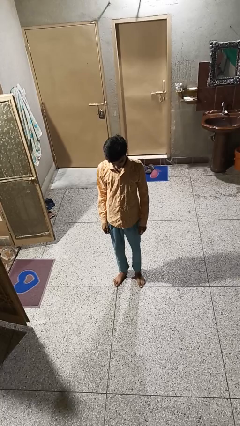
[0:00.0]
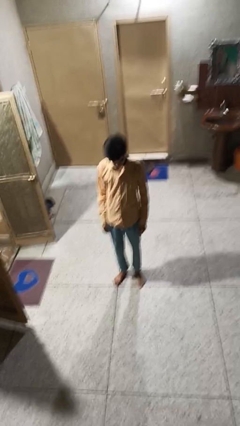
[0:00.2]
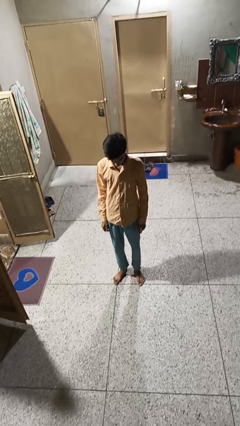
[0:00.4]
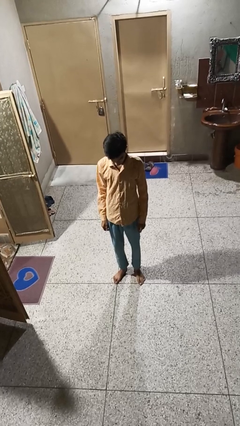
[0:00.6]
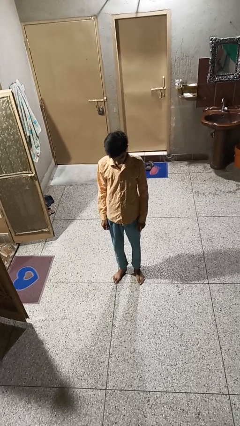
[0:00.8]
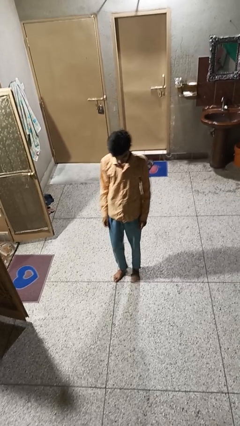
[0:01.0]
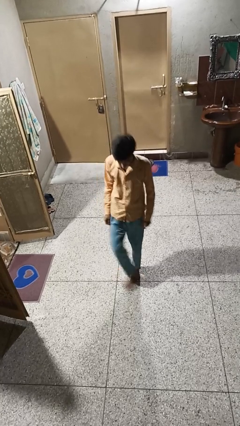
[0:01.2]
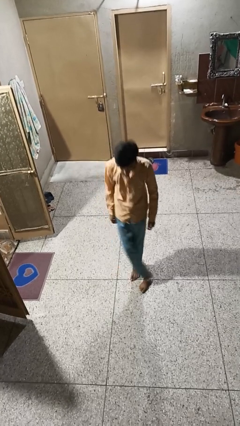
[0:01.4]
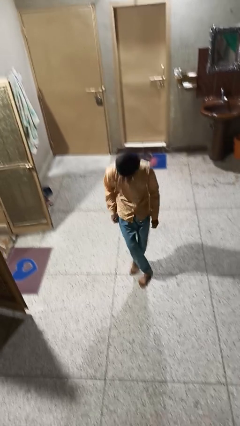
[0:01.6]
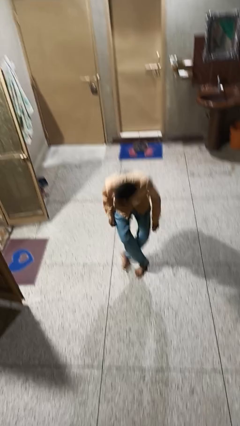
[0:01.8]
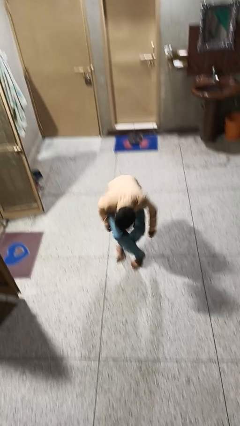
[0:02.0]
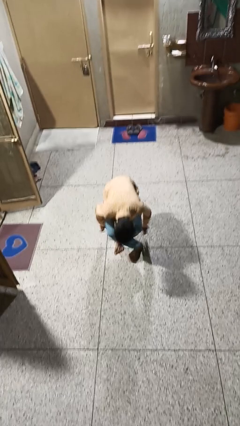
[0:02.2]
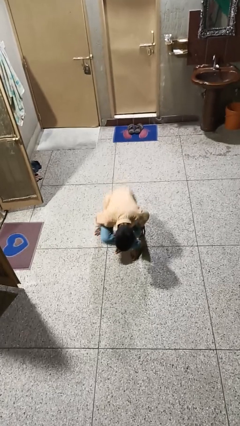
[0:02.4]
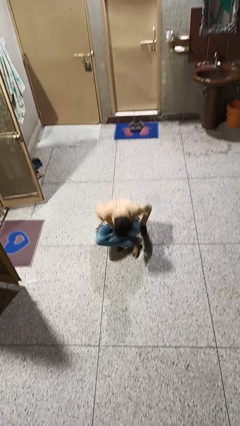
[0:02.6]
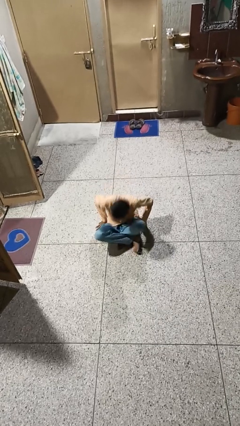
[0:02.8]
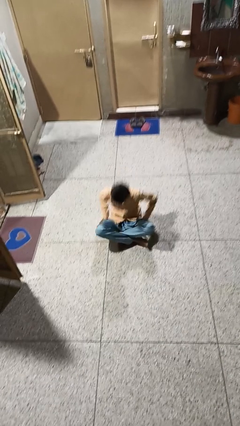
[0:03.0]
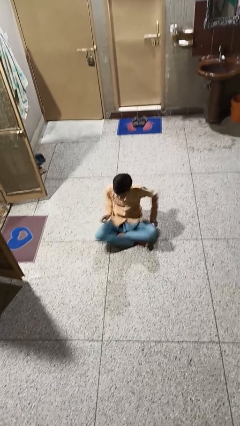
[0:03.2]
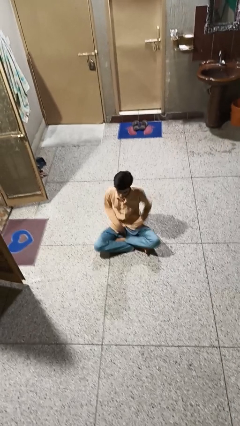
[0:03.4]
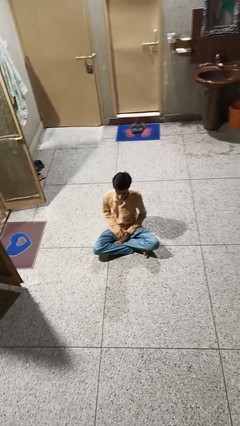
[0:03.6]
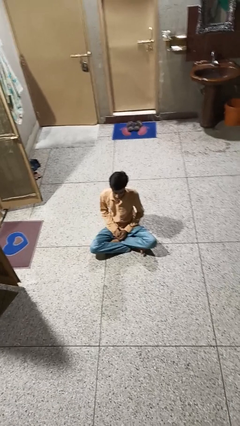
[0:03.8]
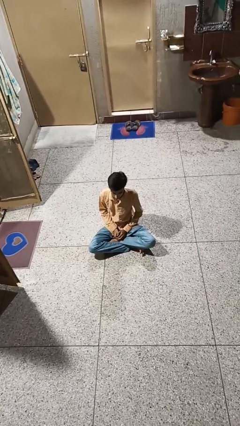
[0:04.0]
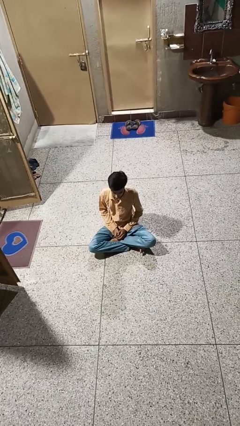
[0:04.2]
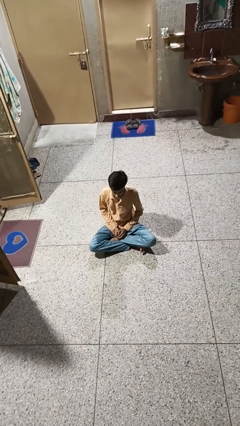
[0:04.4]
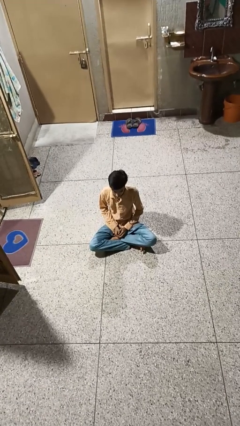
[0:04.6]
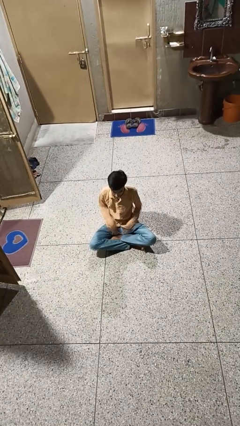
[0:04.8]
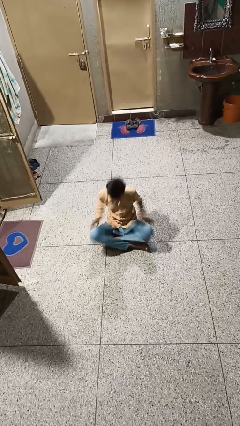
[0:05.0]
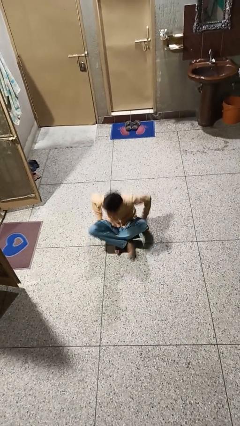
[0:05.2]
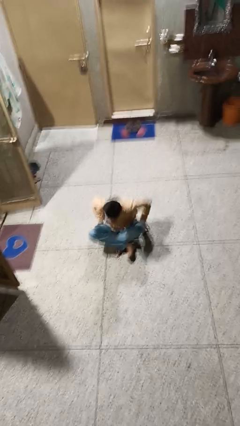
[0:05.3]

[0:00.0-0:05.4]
person sits crisscross

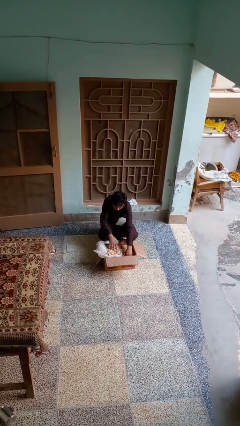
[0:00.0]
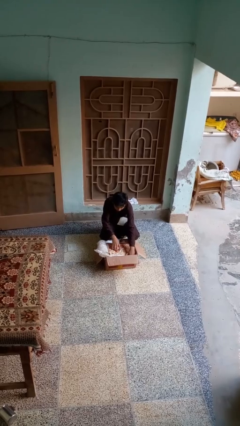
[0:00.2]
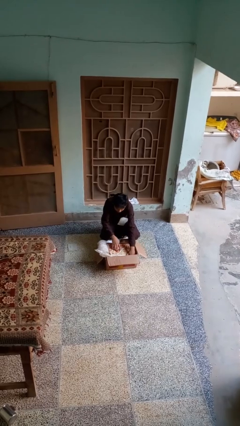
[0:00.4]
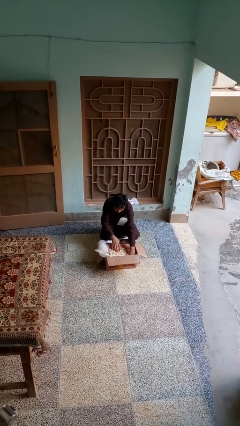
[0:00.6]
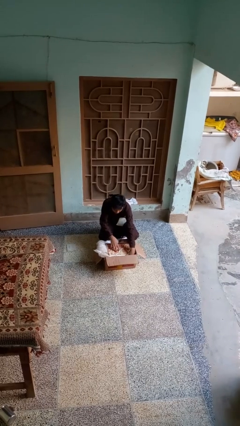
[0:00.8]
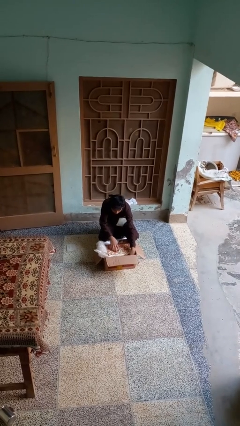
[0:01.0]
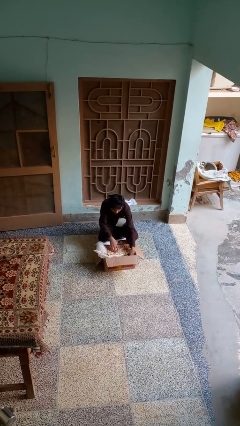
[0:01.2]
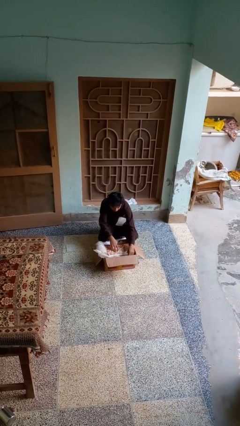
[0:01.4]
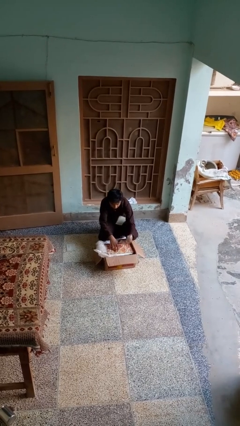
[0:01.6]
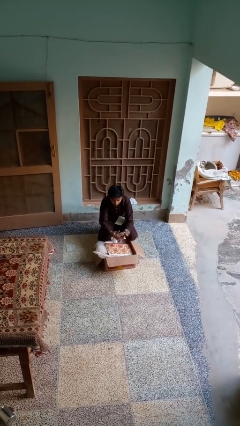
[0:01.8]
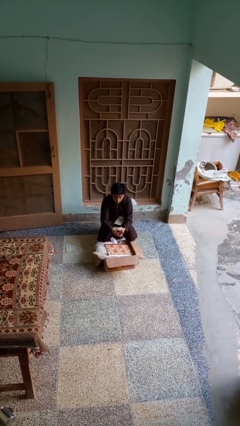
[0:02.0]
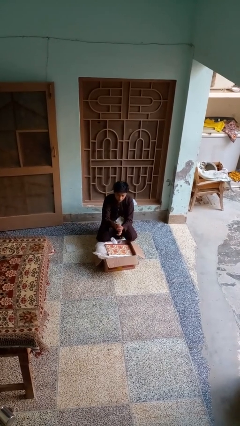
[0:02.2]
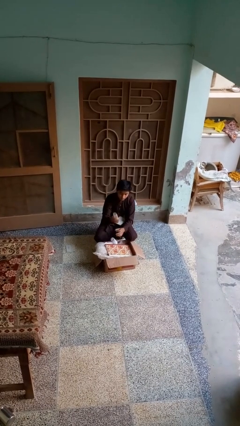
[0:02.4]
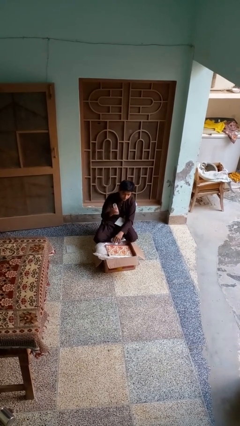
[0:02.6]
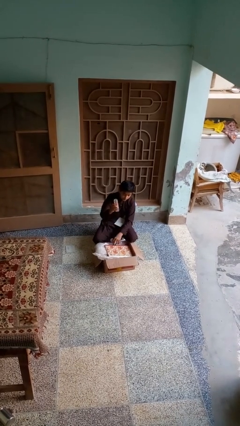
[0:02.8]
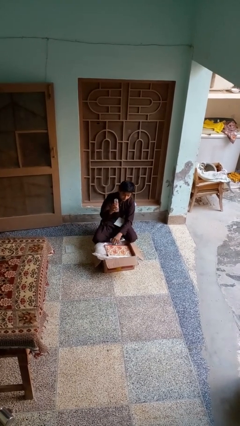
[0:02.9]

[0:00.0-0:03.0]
person takes object from box

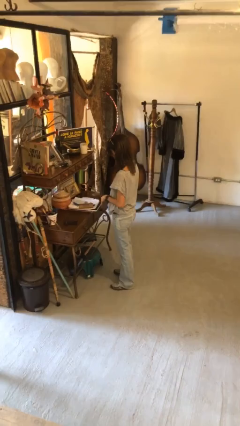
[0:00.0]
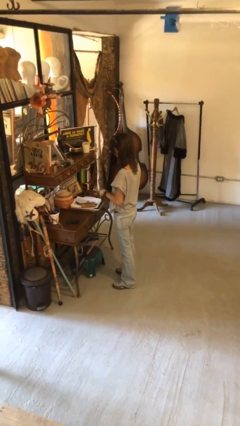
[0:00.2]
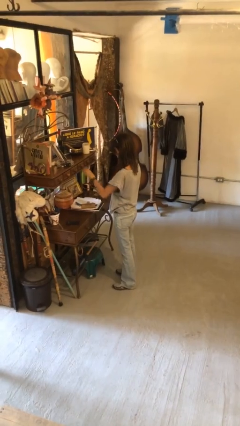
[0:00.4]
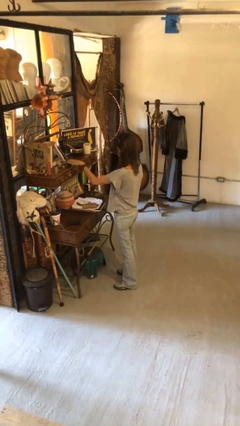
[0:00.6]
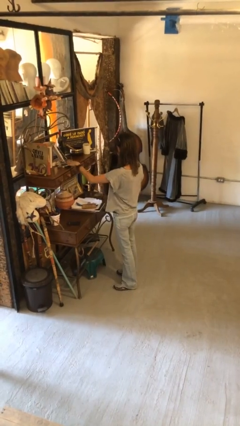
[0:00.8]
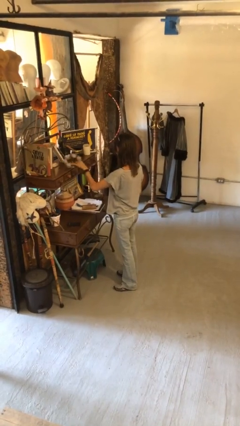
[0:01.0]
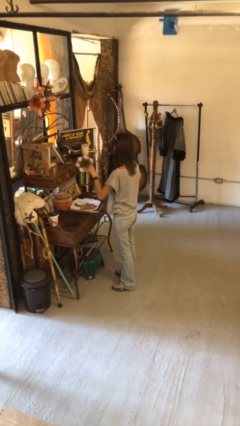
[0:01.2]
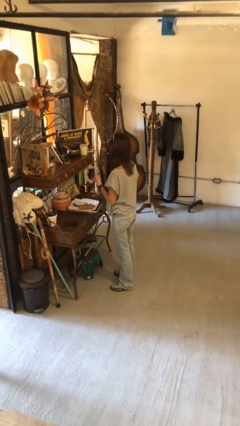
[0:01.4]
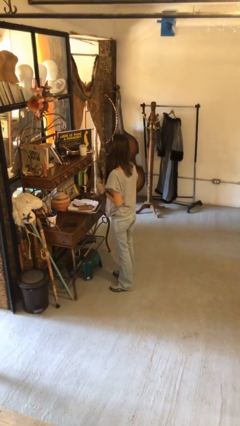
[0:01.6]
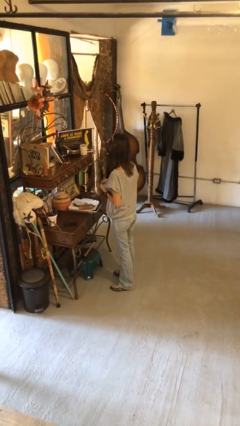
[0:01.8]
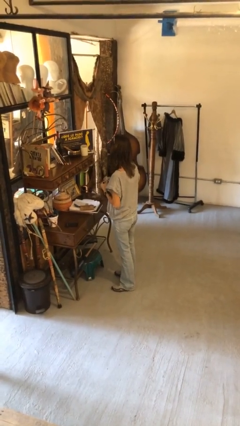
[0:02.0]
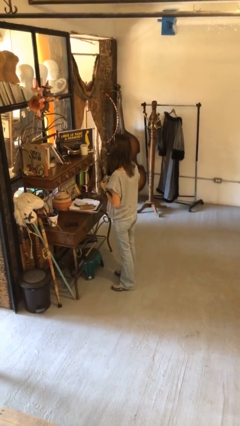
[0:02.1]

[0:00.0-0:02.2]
person picks up object from countertop

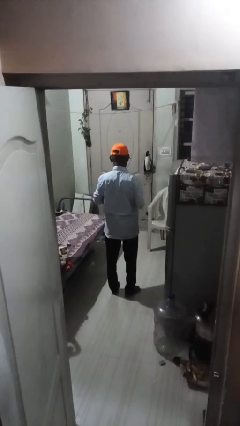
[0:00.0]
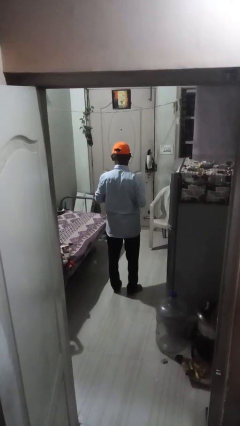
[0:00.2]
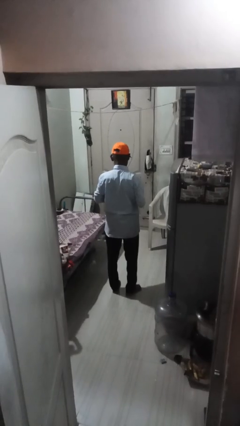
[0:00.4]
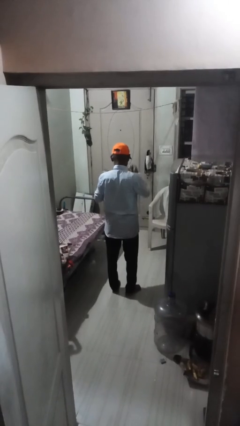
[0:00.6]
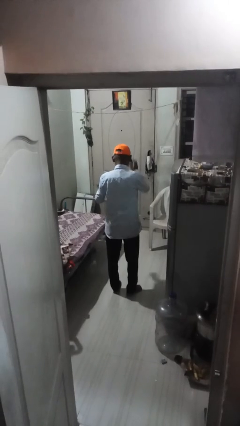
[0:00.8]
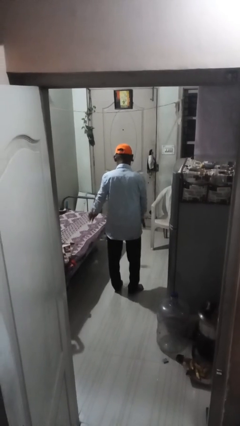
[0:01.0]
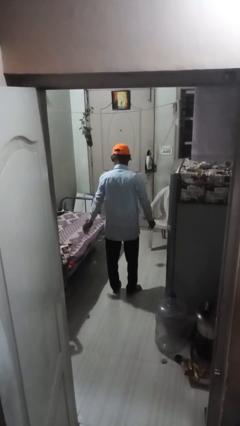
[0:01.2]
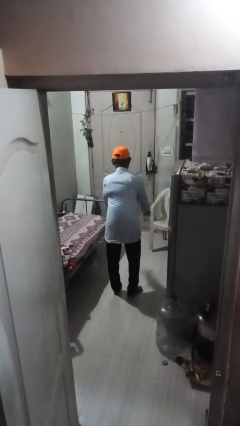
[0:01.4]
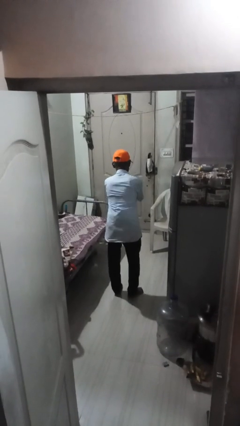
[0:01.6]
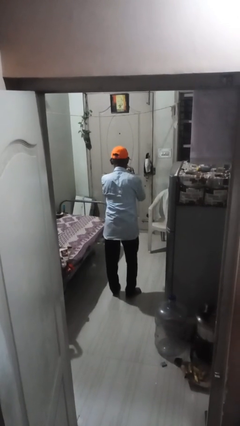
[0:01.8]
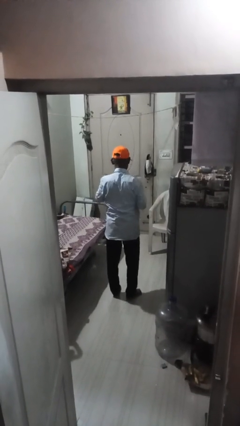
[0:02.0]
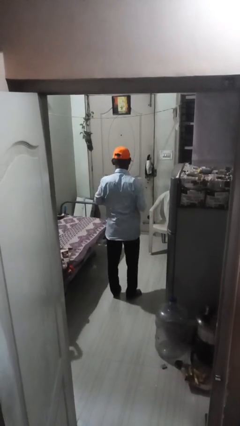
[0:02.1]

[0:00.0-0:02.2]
person bounces ball on floor

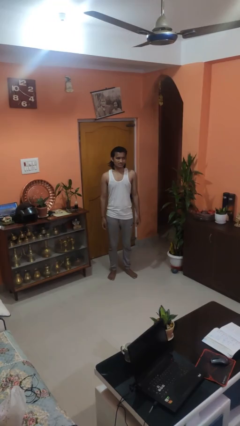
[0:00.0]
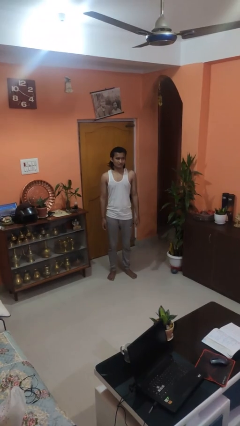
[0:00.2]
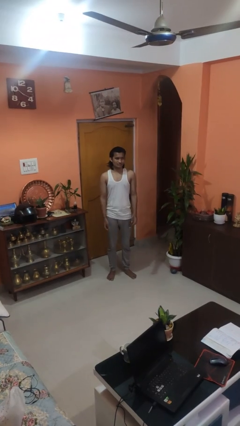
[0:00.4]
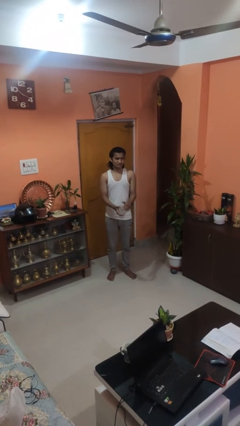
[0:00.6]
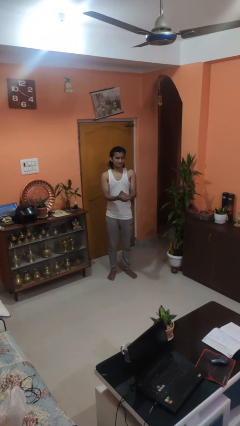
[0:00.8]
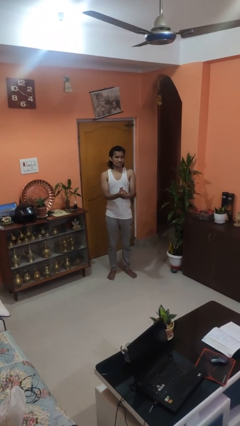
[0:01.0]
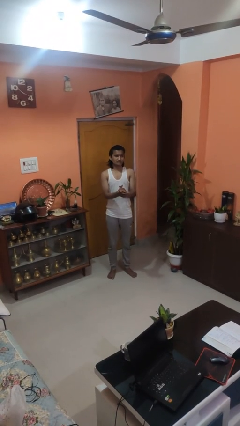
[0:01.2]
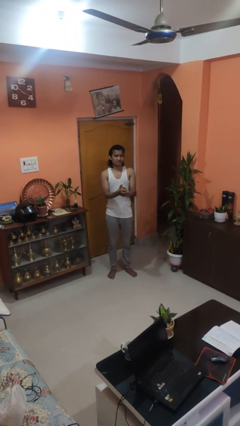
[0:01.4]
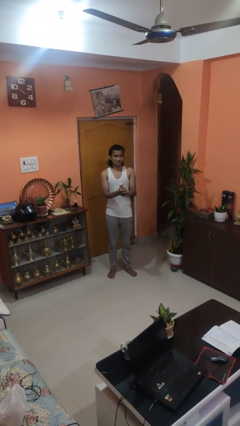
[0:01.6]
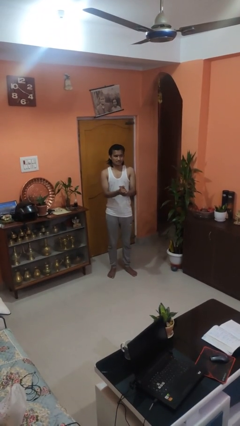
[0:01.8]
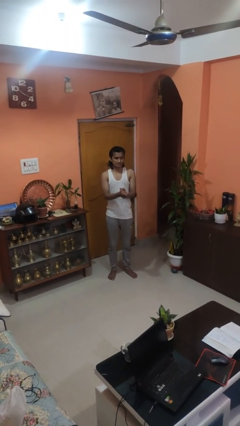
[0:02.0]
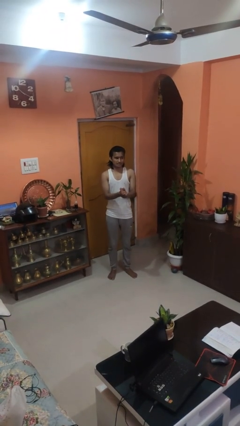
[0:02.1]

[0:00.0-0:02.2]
person claps hands

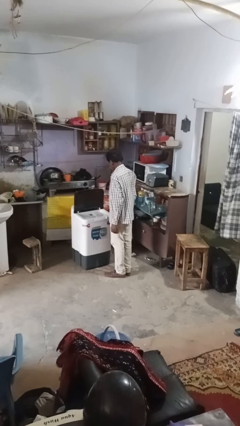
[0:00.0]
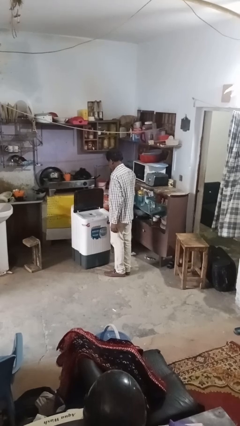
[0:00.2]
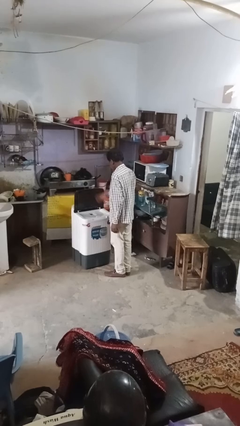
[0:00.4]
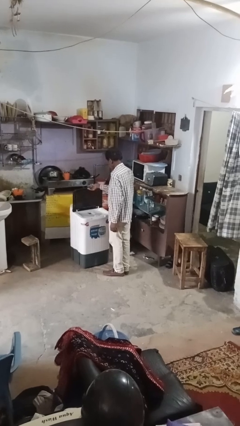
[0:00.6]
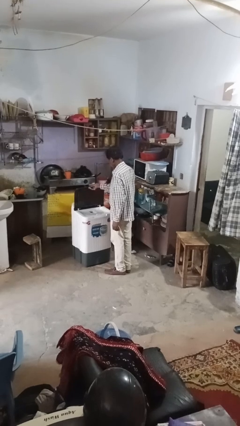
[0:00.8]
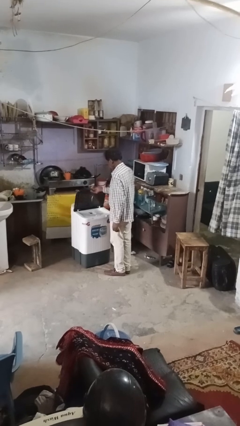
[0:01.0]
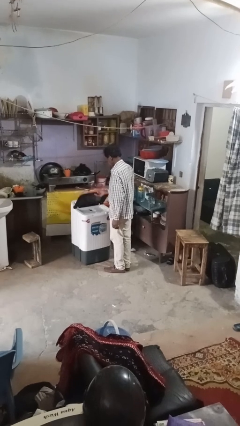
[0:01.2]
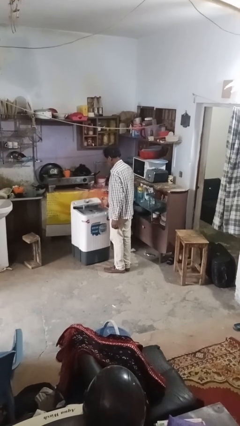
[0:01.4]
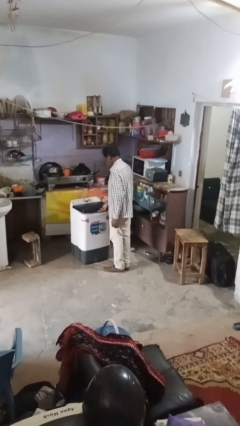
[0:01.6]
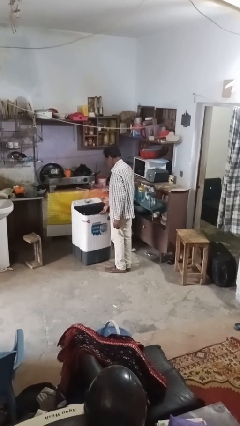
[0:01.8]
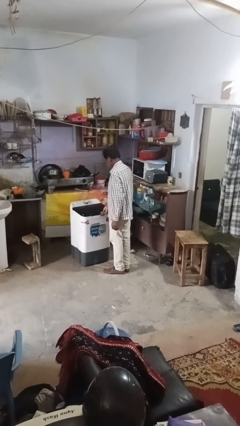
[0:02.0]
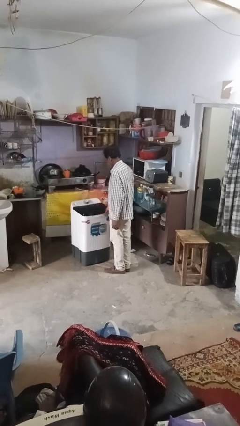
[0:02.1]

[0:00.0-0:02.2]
person closes clothes washer

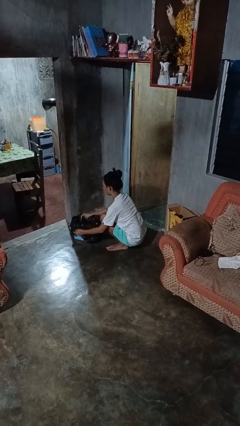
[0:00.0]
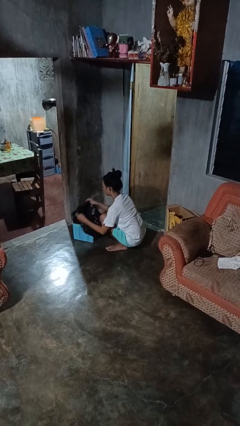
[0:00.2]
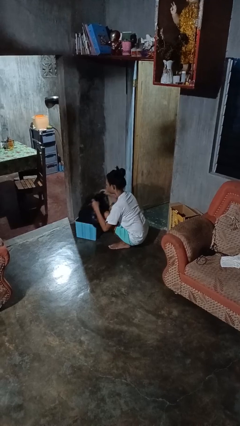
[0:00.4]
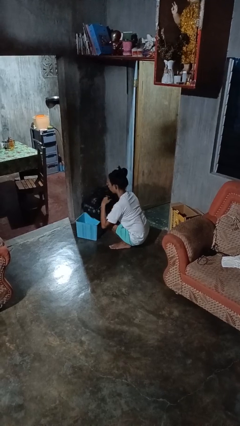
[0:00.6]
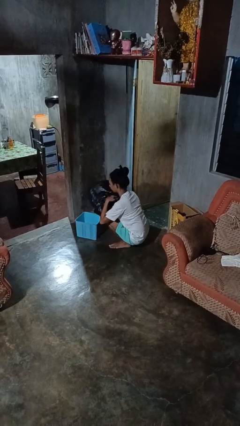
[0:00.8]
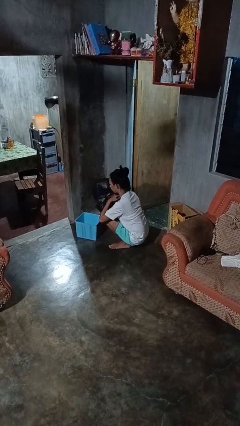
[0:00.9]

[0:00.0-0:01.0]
person removes trashbag from trashcan
